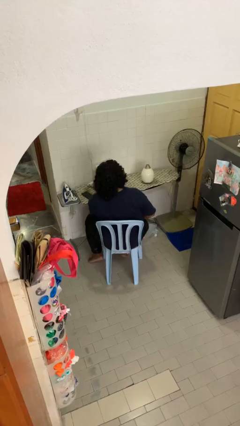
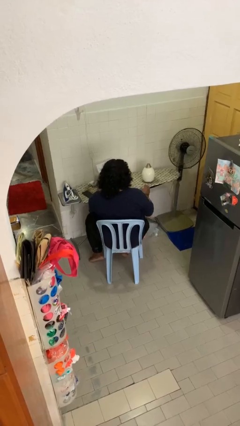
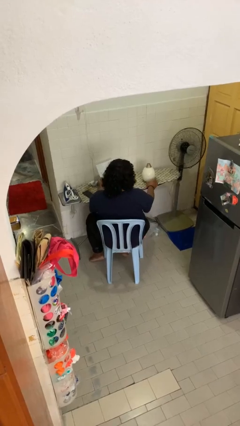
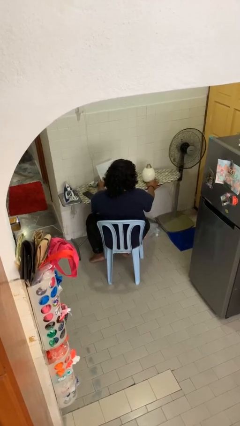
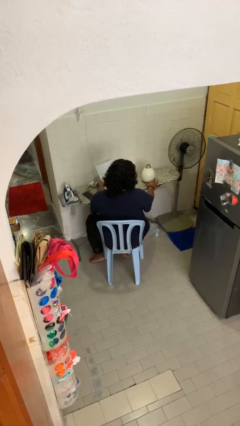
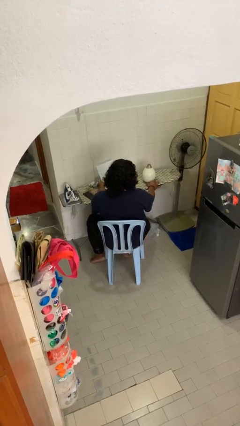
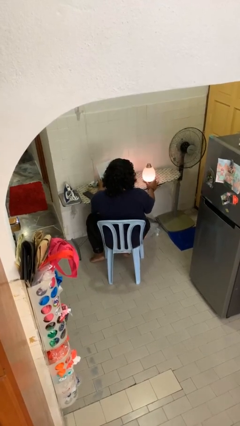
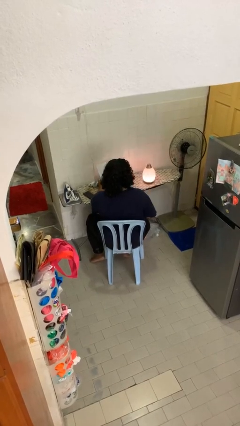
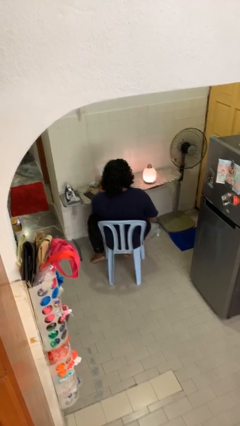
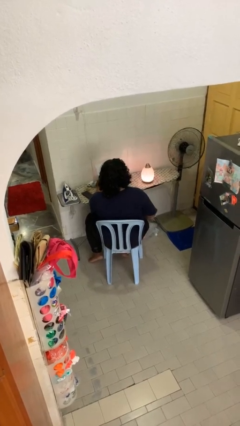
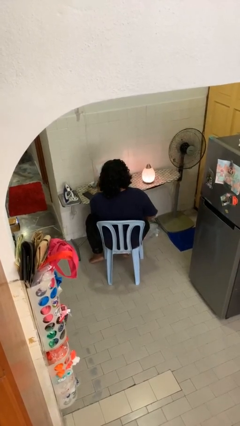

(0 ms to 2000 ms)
person turns on lamp

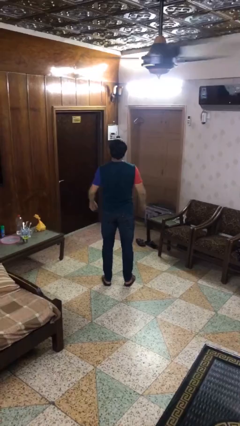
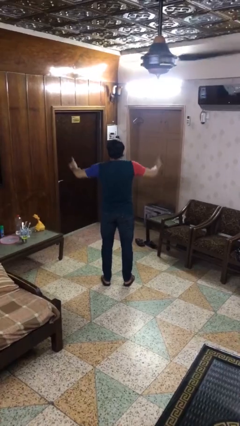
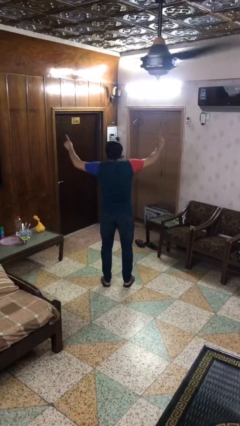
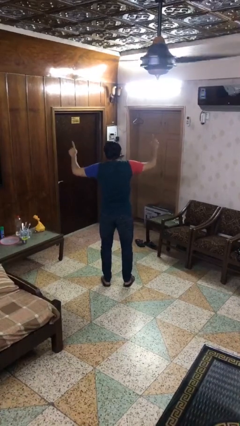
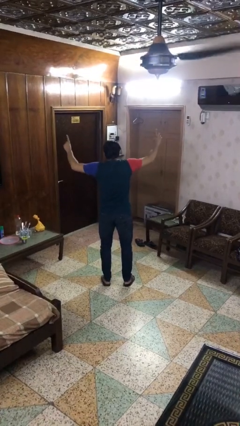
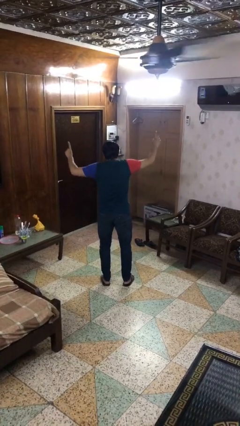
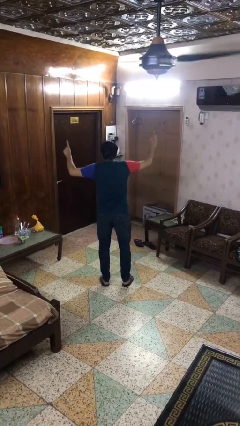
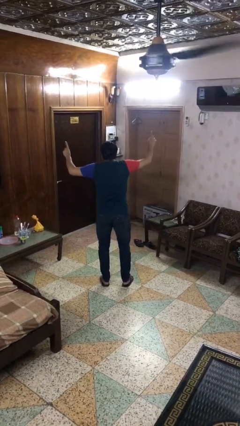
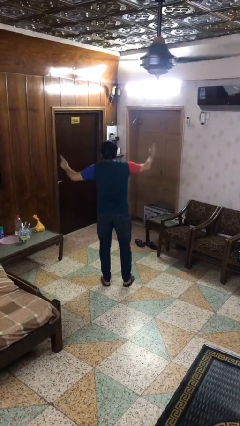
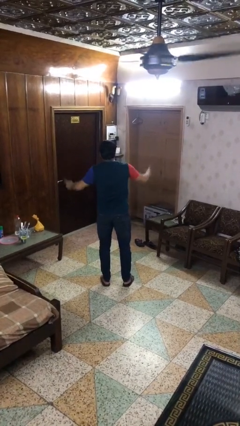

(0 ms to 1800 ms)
person dances in place

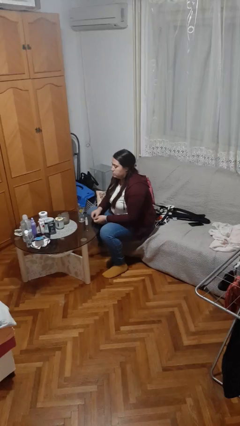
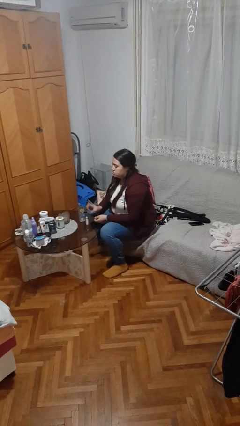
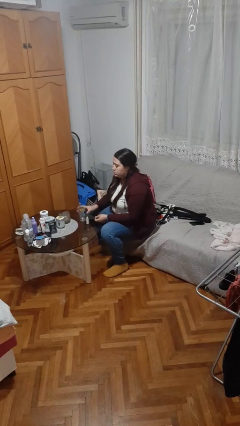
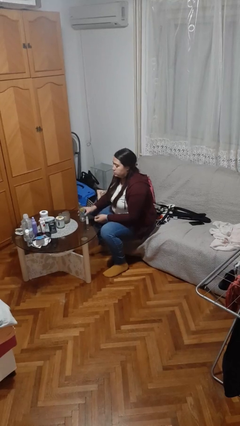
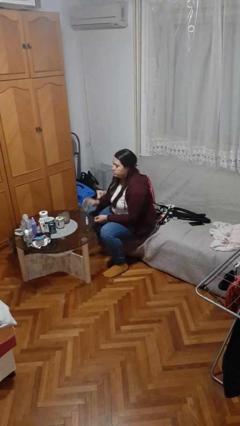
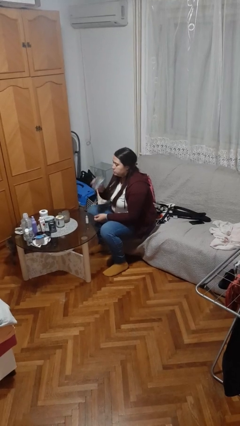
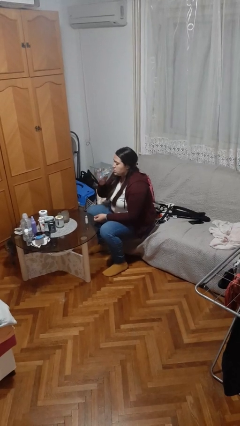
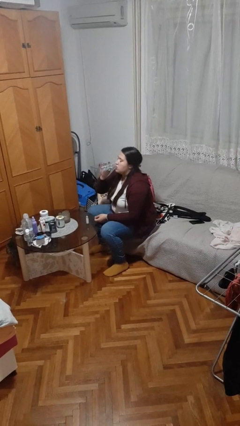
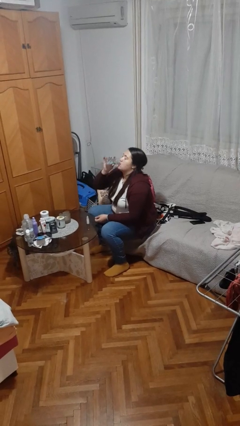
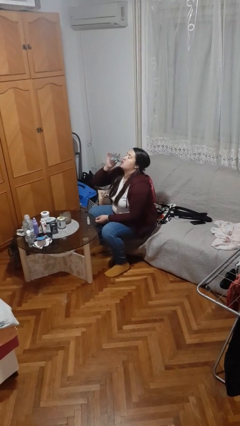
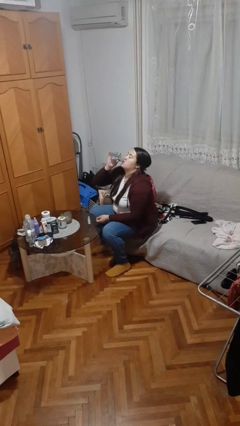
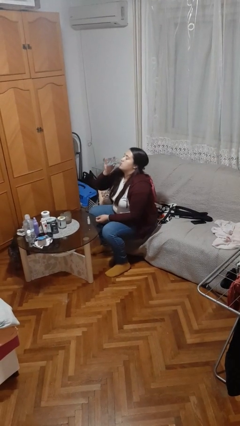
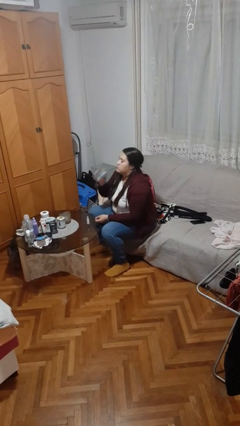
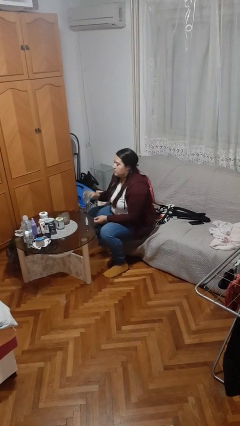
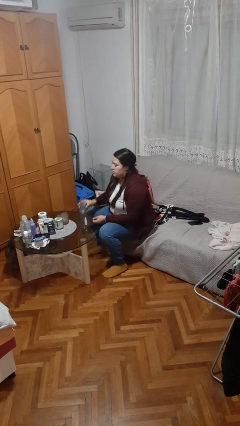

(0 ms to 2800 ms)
person drinks from cup

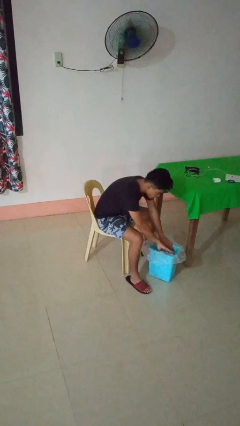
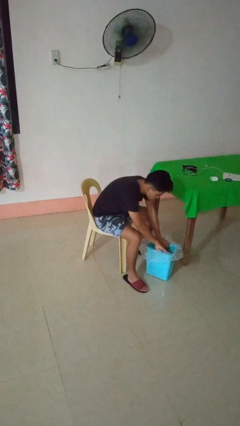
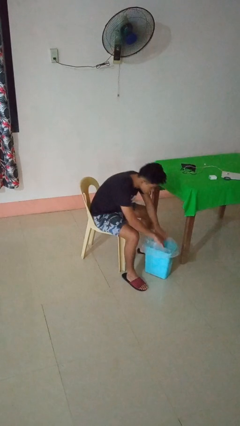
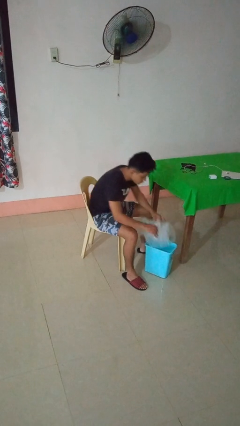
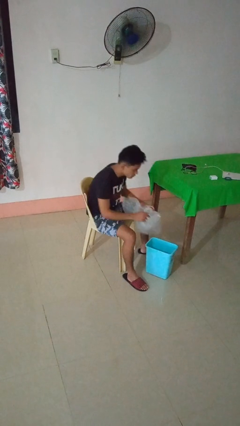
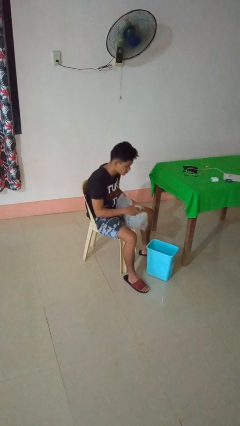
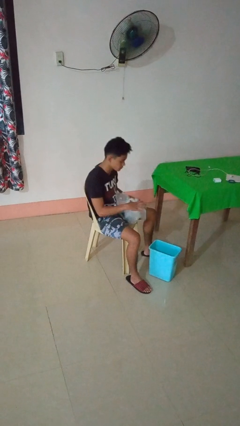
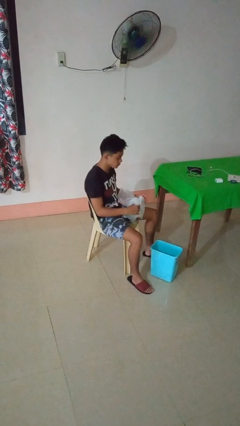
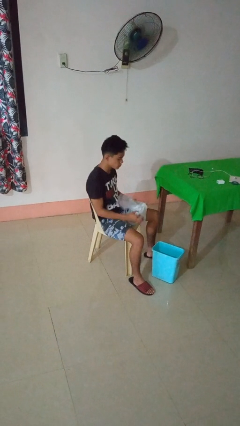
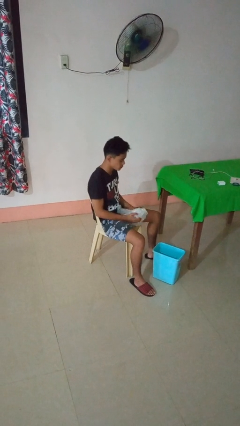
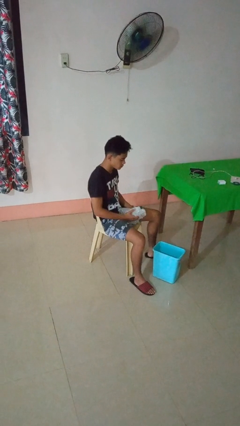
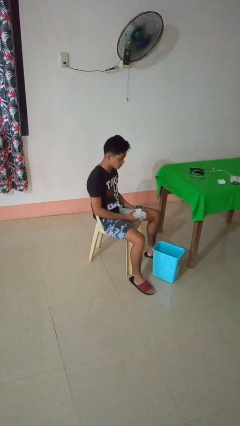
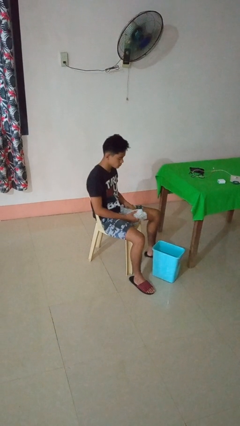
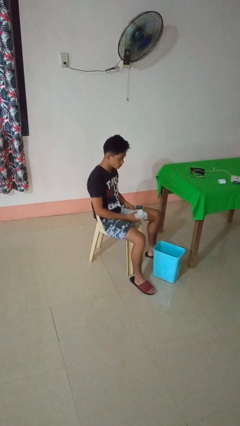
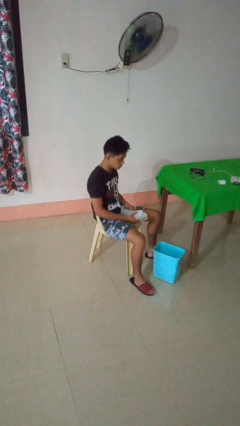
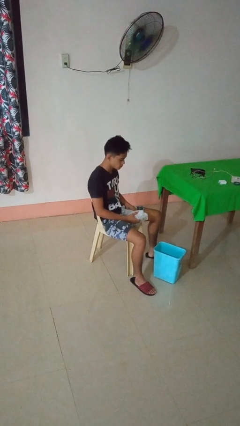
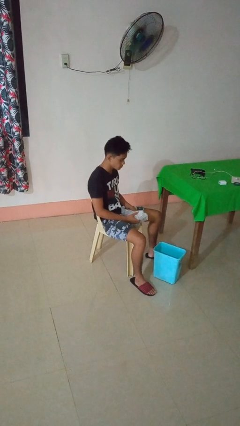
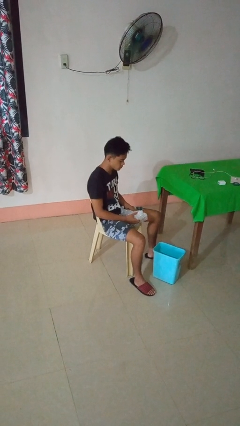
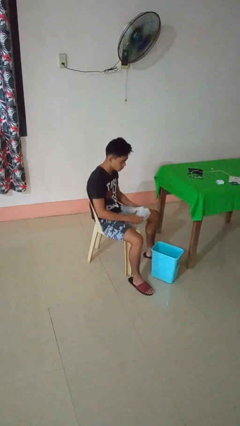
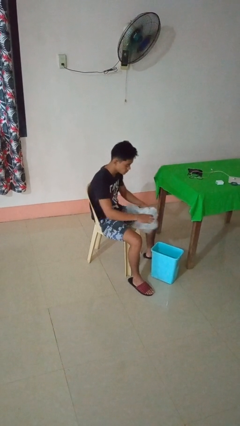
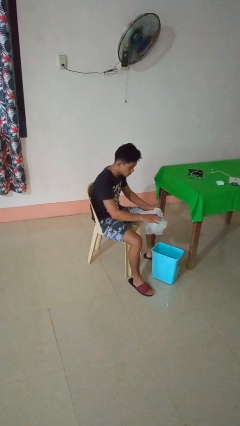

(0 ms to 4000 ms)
person removes trashbag from trashcan

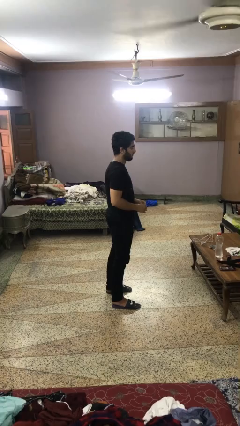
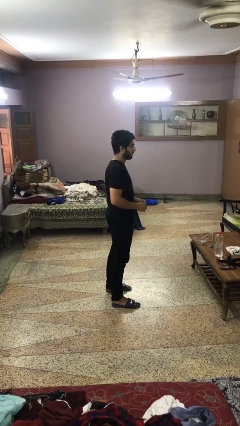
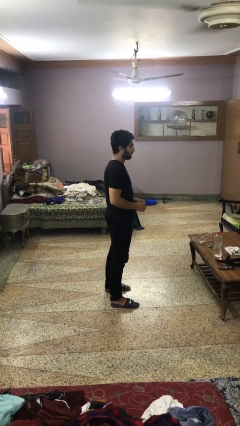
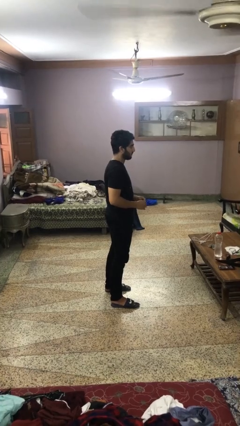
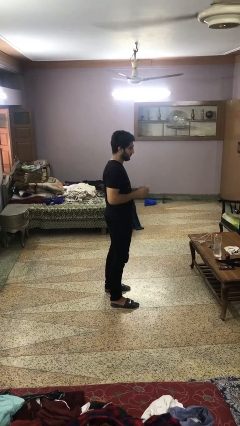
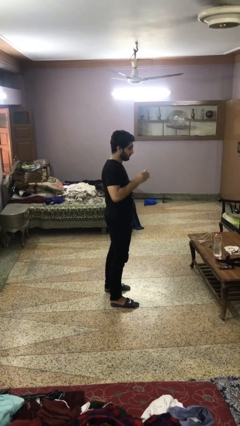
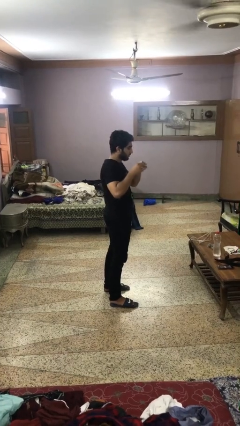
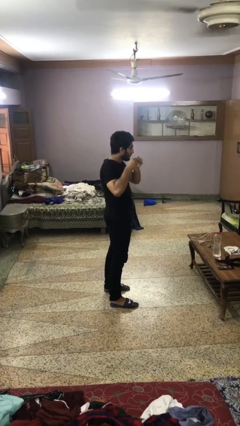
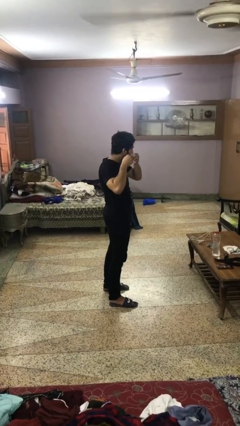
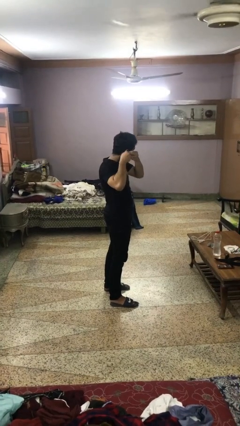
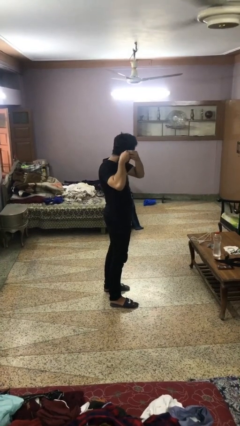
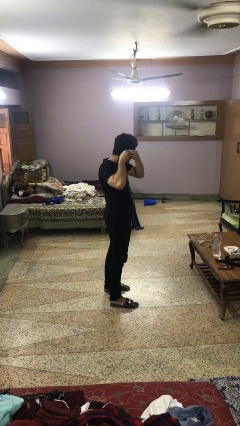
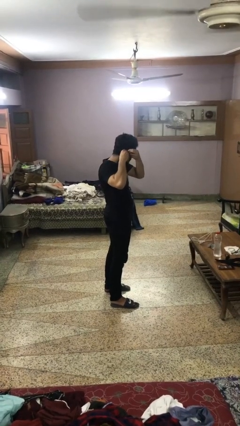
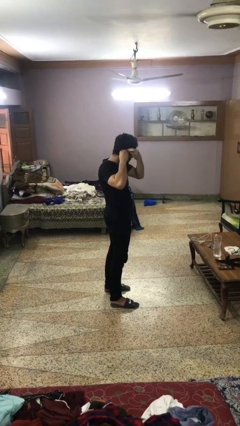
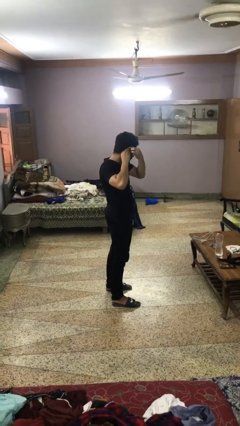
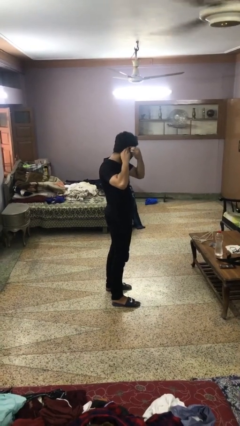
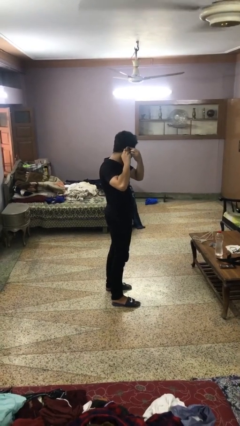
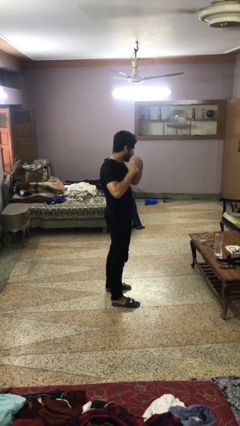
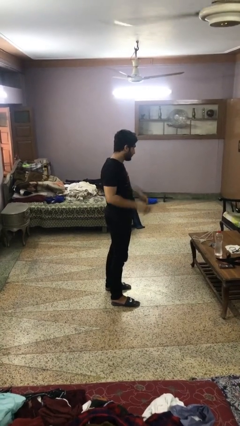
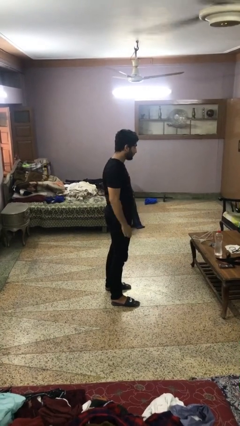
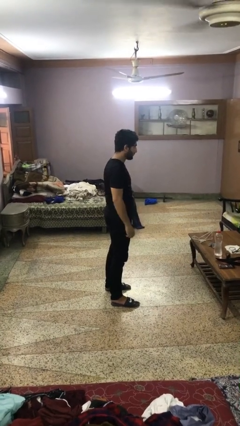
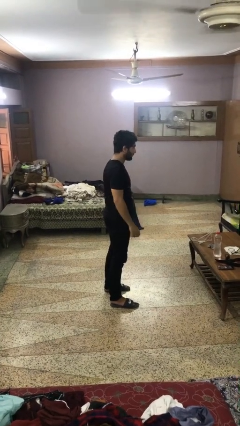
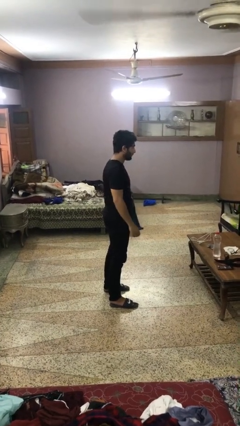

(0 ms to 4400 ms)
person puts on earrings

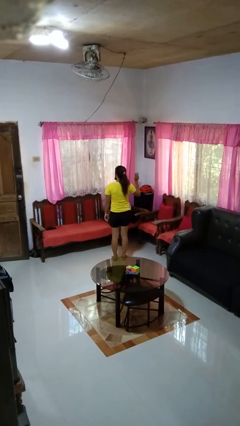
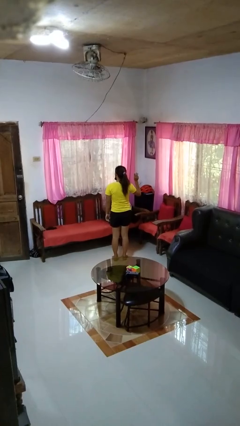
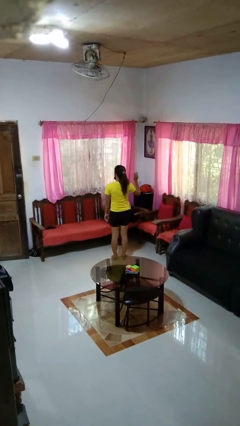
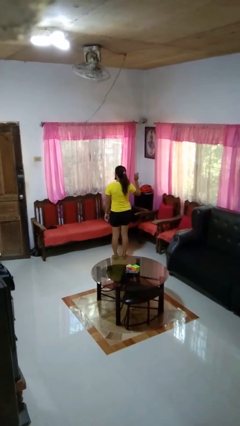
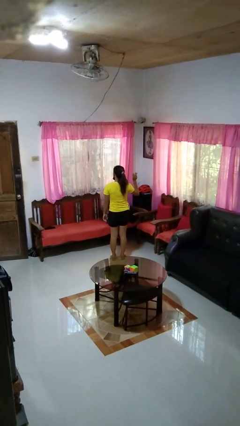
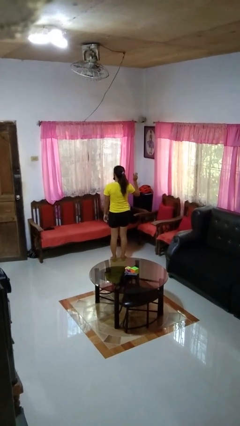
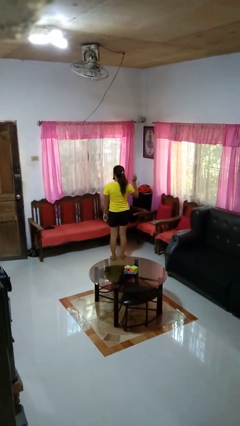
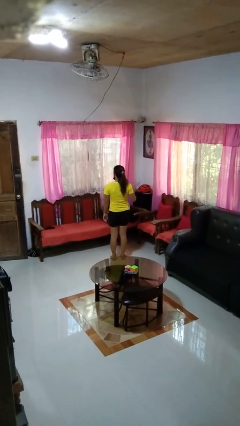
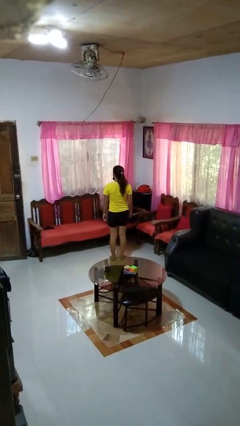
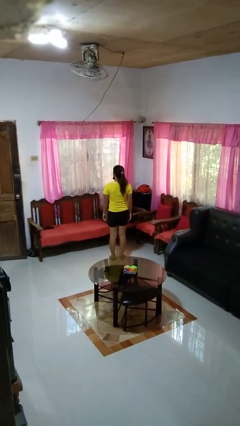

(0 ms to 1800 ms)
person gestures number three

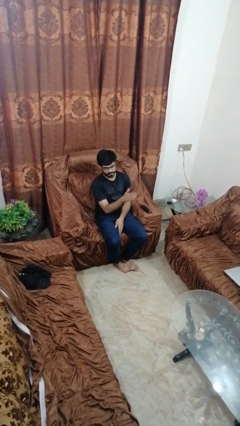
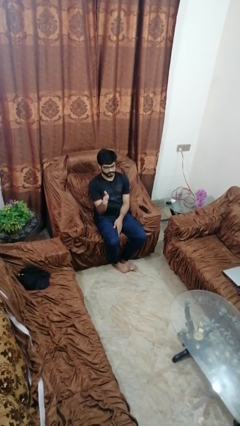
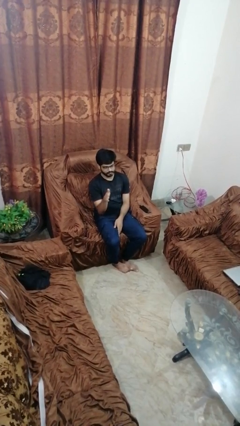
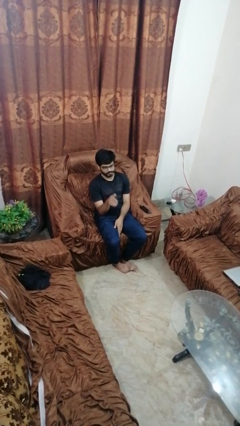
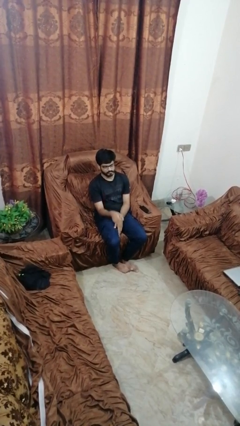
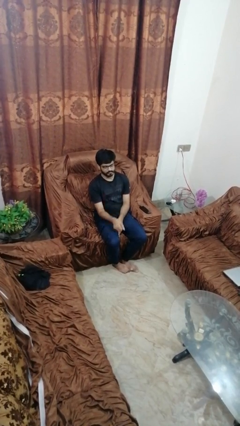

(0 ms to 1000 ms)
person gestures swipe right
